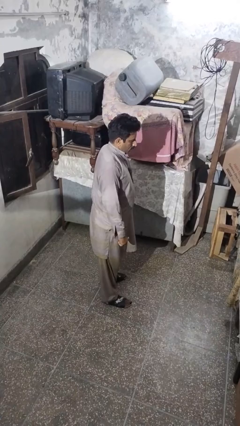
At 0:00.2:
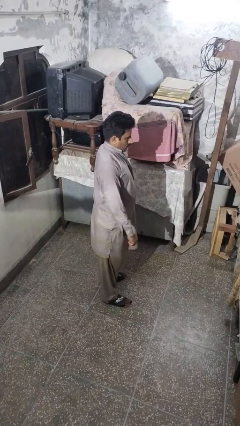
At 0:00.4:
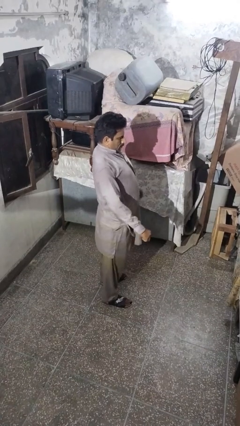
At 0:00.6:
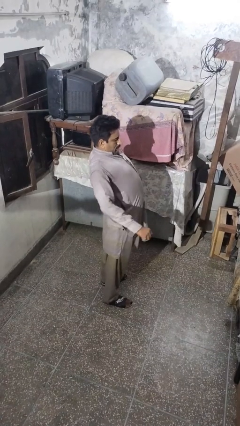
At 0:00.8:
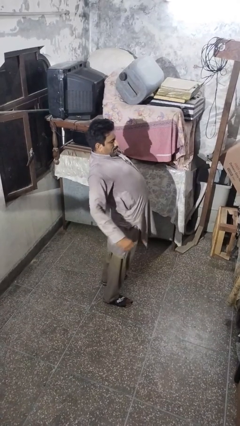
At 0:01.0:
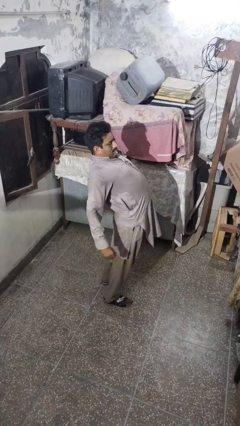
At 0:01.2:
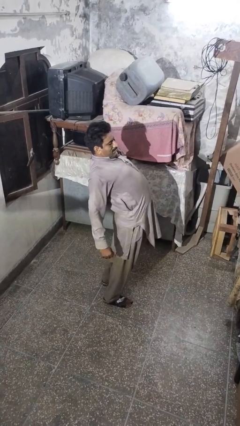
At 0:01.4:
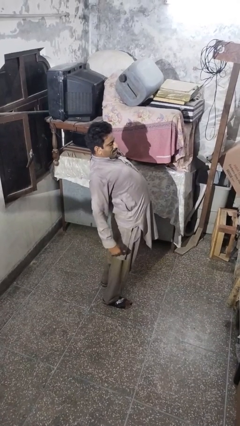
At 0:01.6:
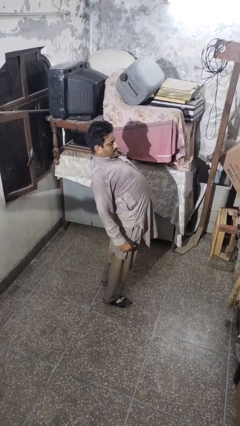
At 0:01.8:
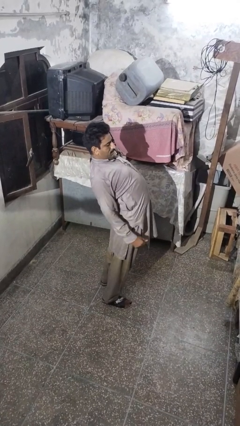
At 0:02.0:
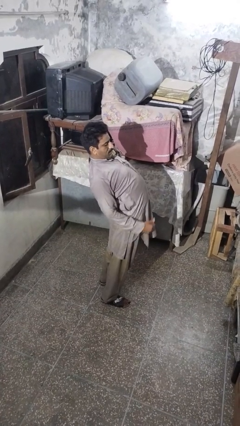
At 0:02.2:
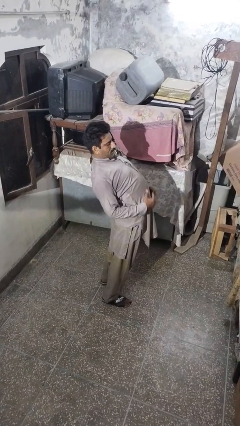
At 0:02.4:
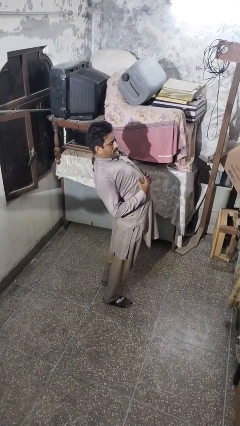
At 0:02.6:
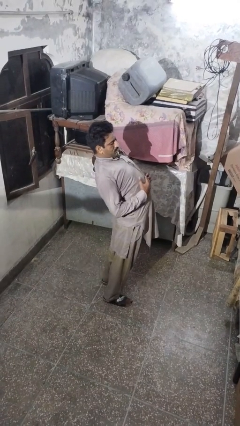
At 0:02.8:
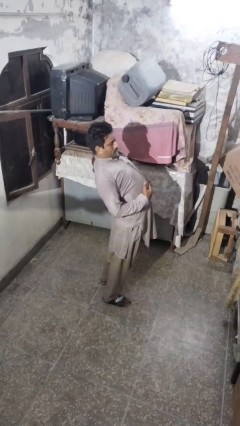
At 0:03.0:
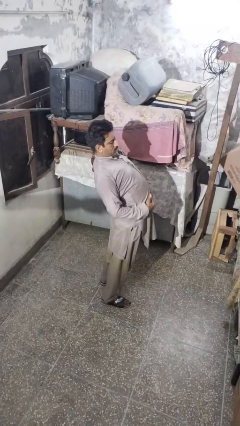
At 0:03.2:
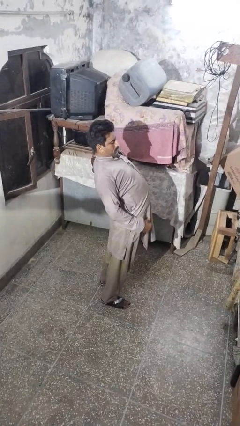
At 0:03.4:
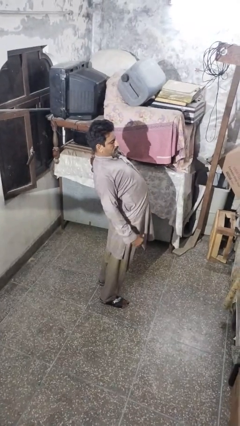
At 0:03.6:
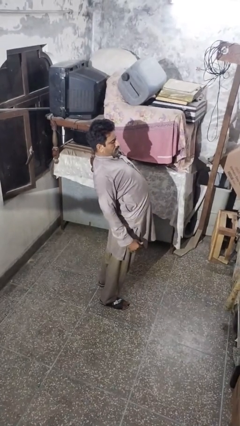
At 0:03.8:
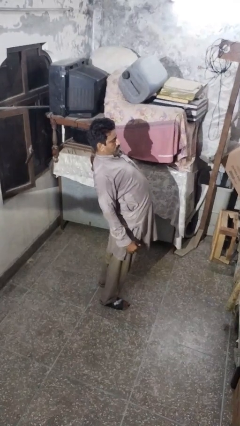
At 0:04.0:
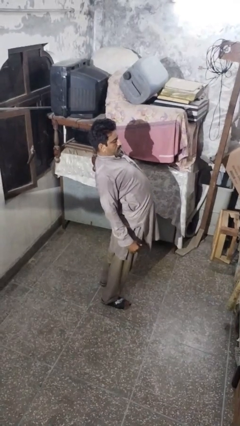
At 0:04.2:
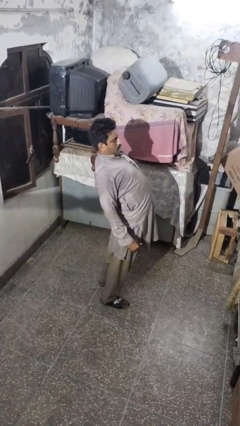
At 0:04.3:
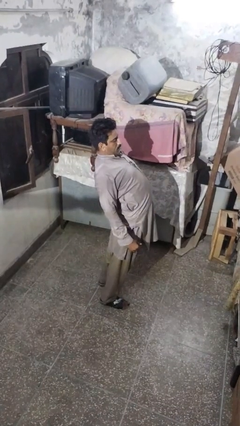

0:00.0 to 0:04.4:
person stretches back

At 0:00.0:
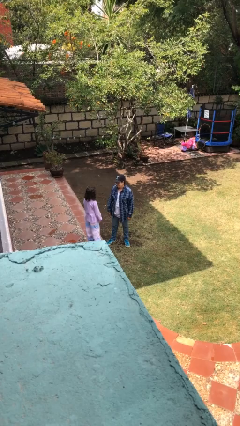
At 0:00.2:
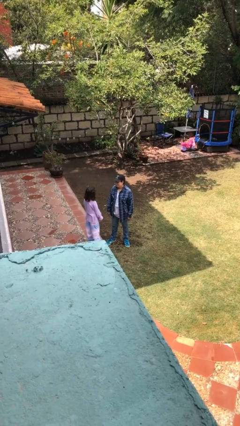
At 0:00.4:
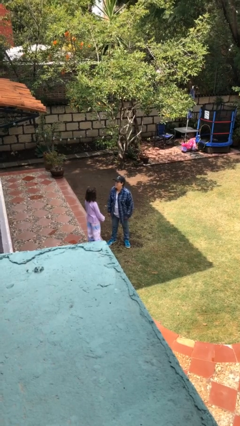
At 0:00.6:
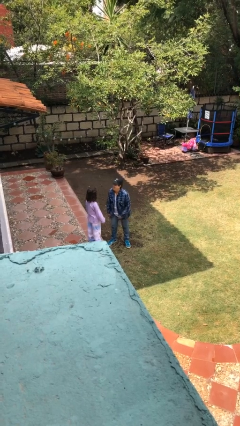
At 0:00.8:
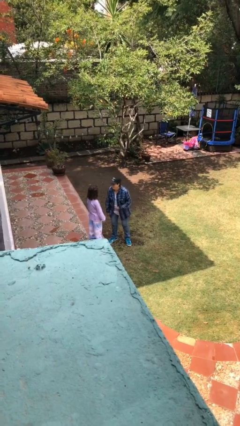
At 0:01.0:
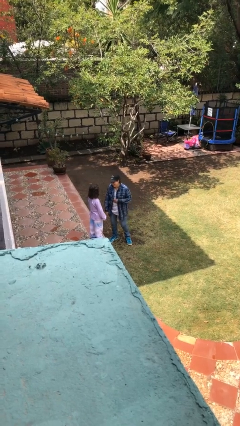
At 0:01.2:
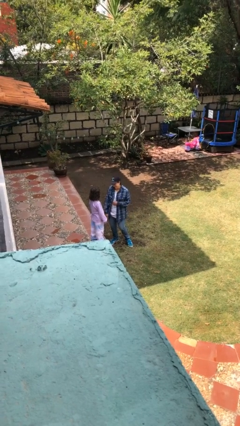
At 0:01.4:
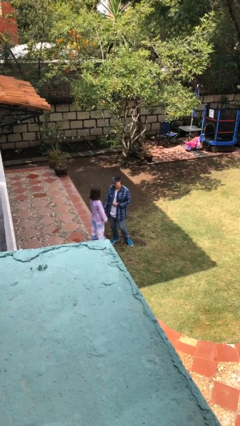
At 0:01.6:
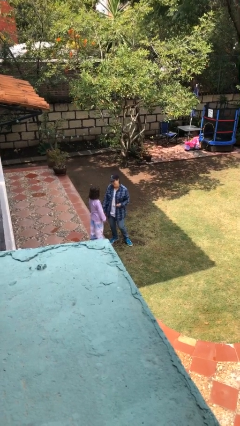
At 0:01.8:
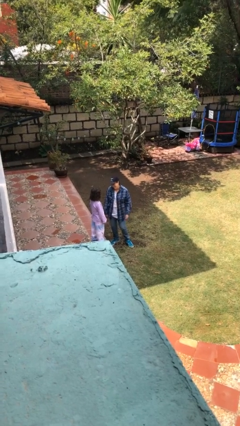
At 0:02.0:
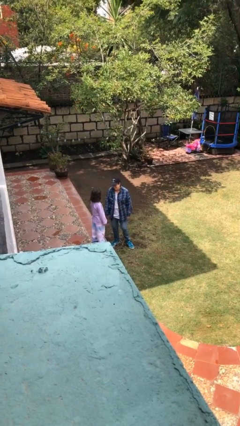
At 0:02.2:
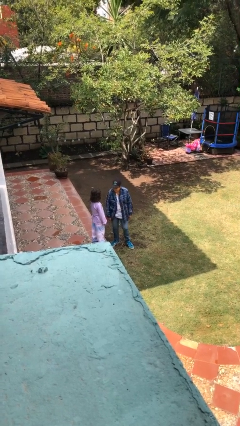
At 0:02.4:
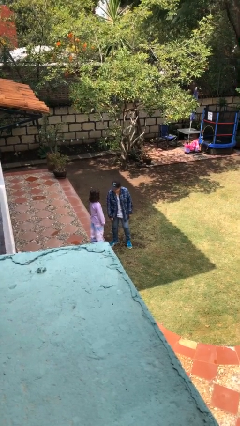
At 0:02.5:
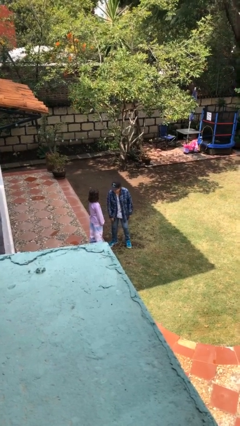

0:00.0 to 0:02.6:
person laughs with person

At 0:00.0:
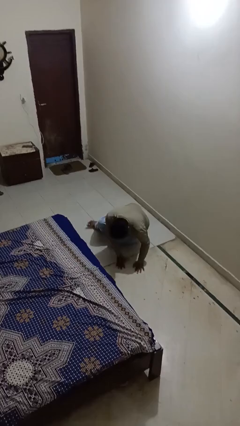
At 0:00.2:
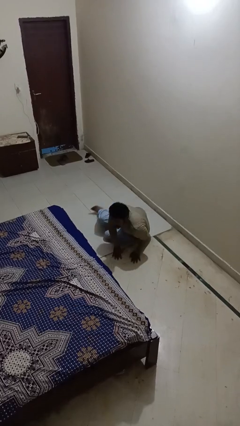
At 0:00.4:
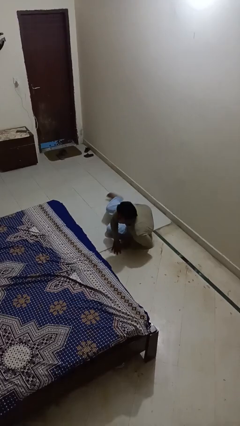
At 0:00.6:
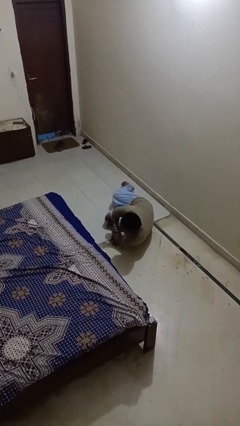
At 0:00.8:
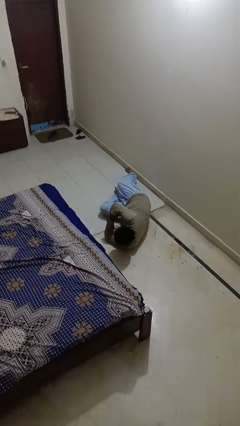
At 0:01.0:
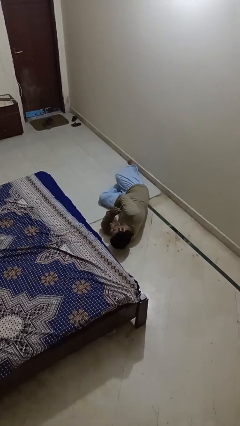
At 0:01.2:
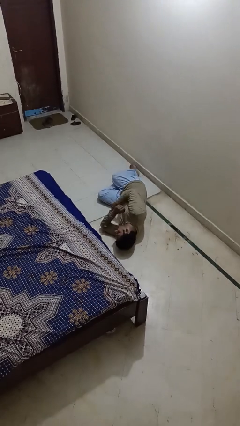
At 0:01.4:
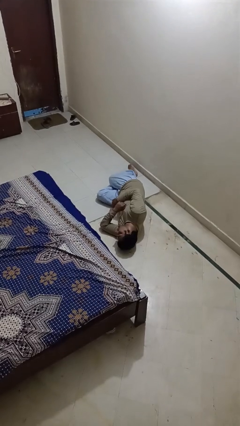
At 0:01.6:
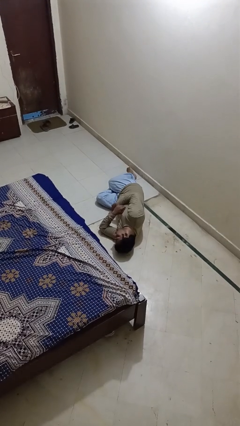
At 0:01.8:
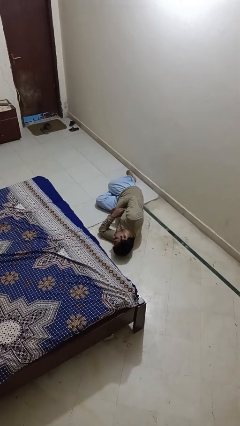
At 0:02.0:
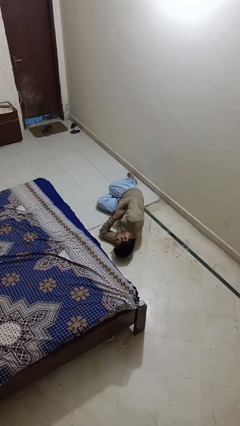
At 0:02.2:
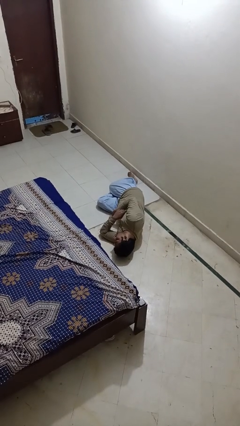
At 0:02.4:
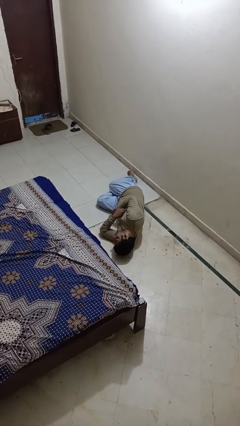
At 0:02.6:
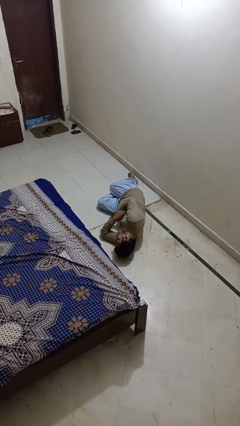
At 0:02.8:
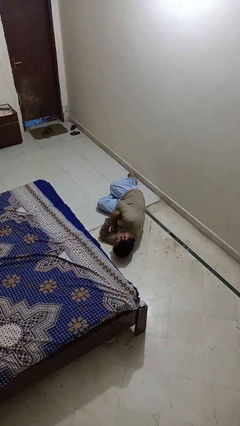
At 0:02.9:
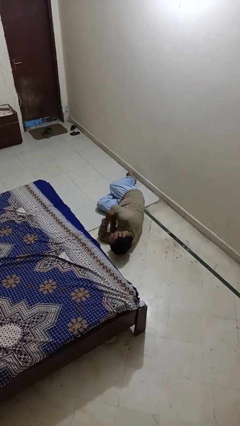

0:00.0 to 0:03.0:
person lies down on floor

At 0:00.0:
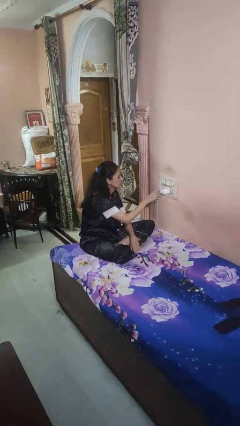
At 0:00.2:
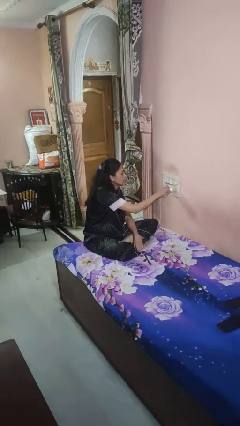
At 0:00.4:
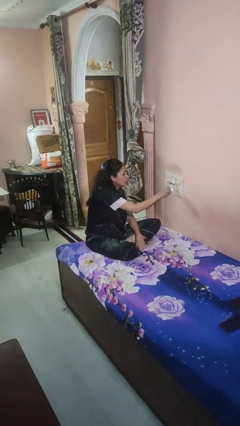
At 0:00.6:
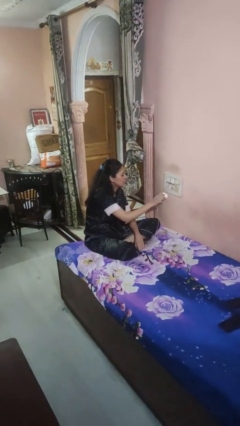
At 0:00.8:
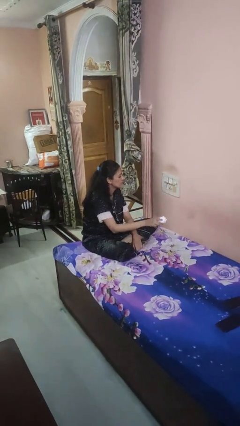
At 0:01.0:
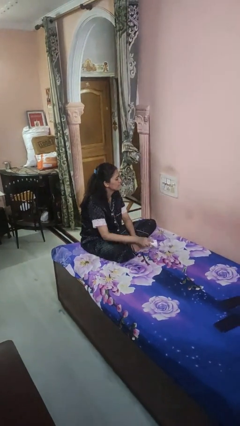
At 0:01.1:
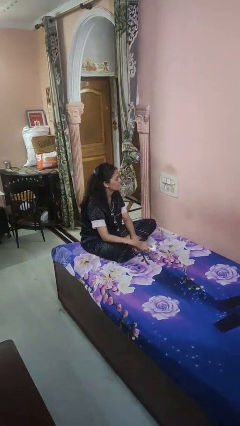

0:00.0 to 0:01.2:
person unplugs from electrical socket

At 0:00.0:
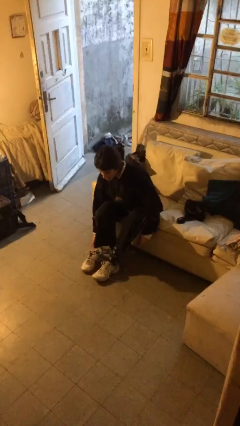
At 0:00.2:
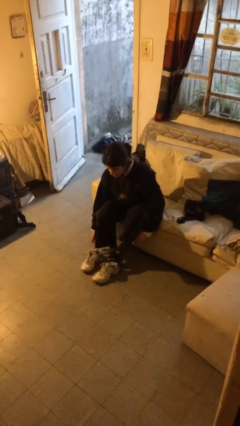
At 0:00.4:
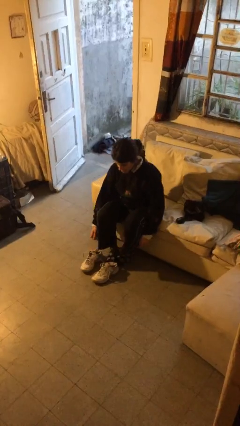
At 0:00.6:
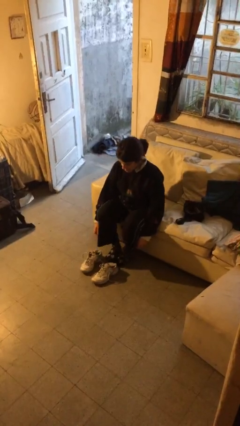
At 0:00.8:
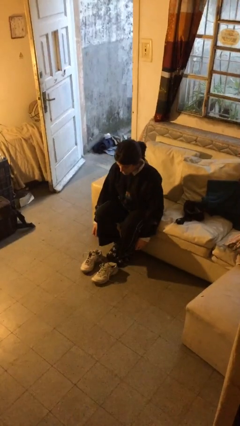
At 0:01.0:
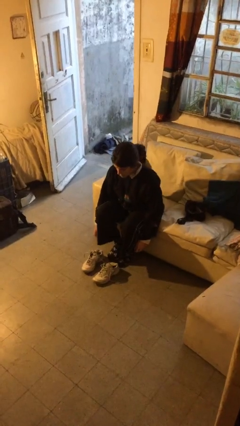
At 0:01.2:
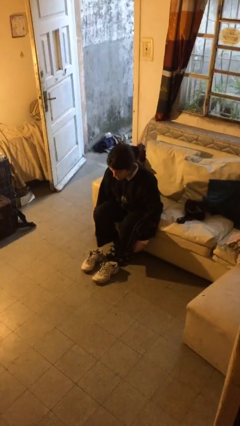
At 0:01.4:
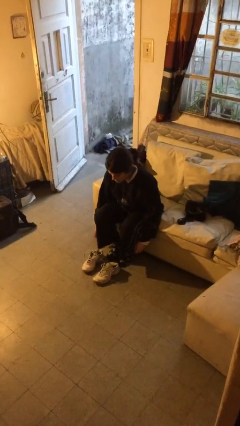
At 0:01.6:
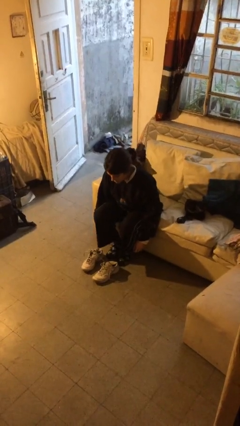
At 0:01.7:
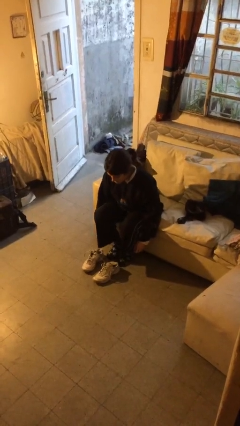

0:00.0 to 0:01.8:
person takes off shoes

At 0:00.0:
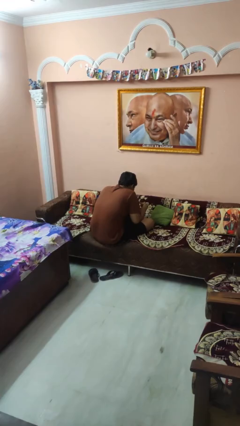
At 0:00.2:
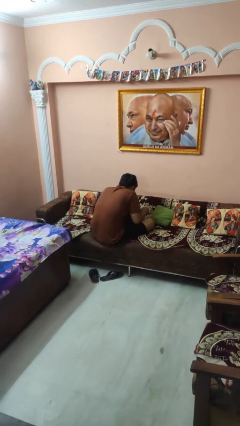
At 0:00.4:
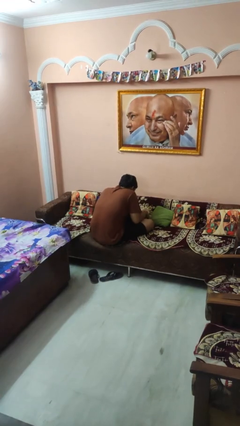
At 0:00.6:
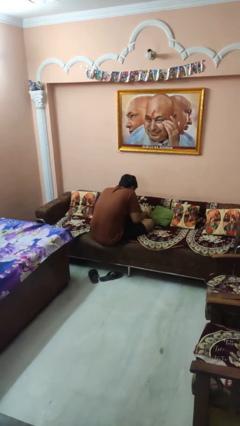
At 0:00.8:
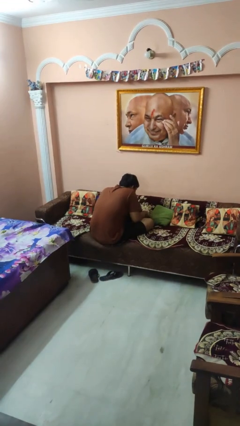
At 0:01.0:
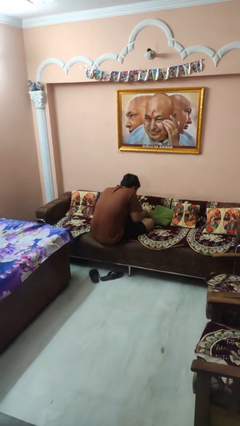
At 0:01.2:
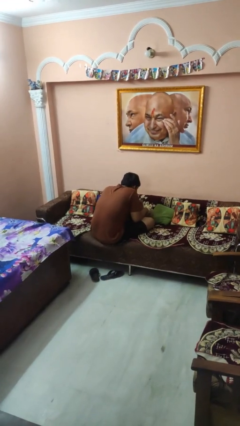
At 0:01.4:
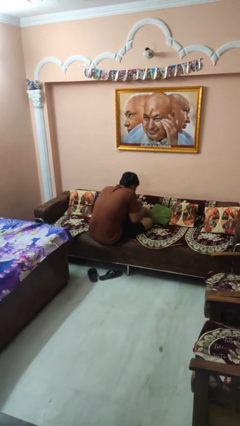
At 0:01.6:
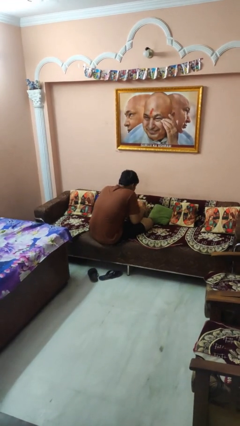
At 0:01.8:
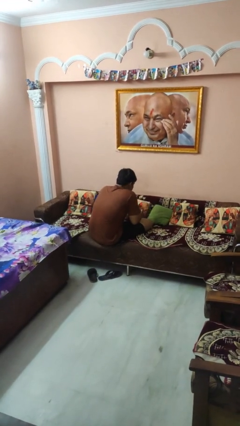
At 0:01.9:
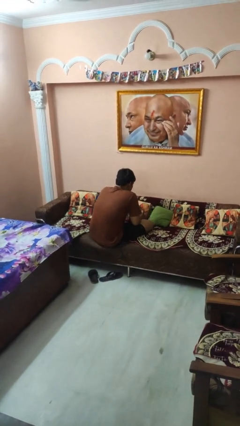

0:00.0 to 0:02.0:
person searches in couch

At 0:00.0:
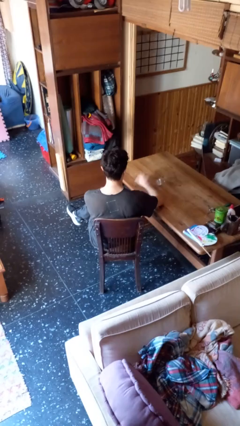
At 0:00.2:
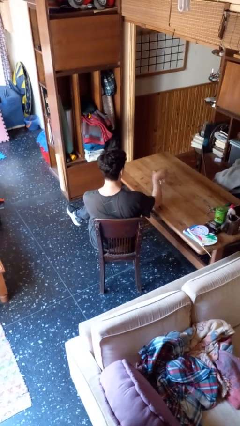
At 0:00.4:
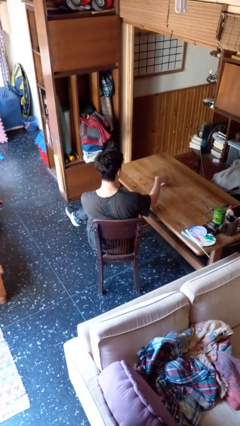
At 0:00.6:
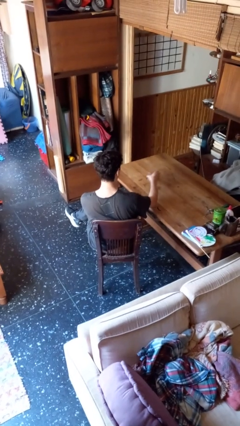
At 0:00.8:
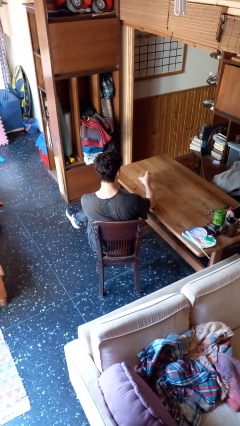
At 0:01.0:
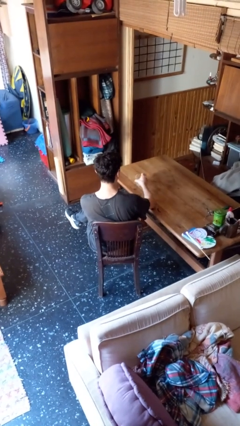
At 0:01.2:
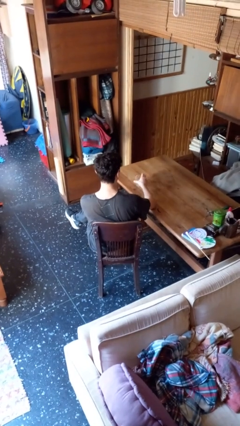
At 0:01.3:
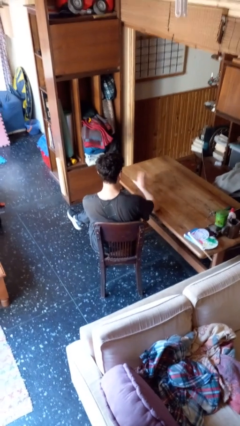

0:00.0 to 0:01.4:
person sets upright glass
